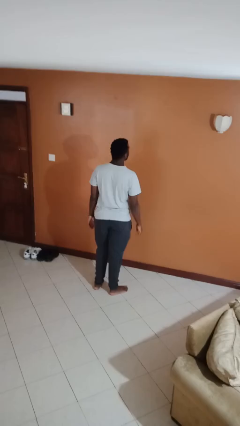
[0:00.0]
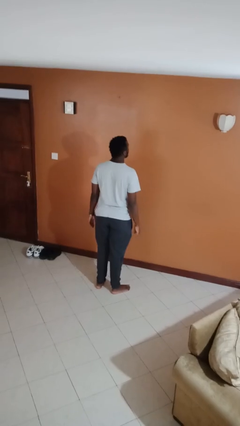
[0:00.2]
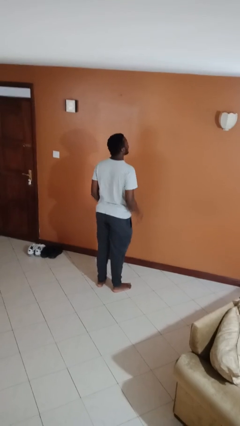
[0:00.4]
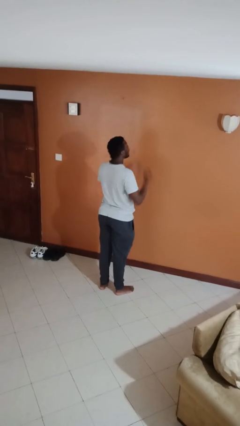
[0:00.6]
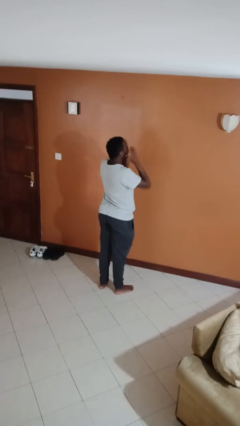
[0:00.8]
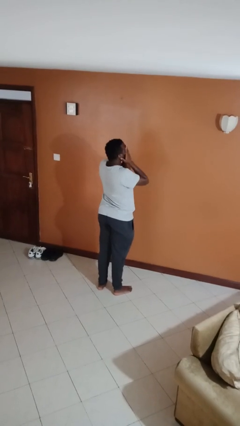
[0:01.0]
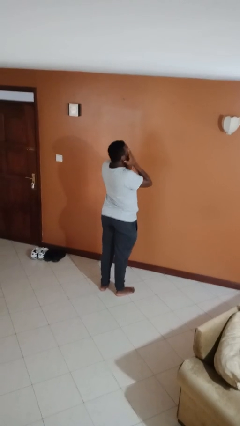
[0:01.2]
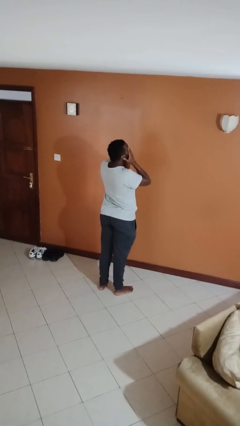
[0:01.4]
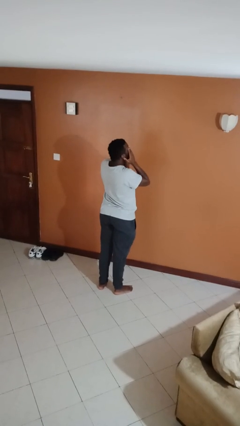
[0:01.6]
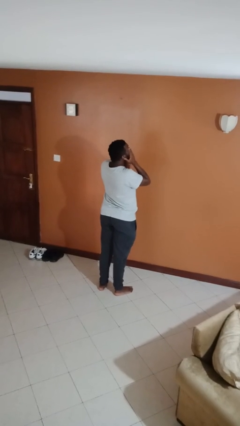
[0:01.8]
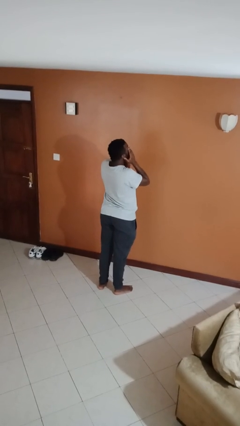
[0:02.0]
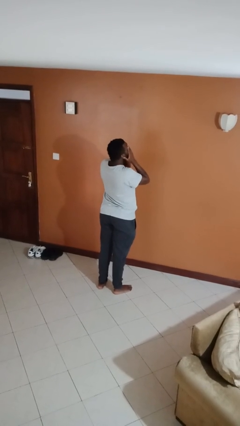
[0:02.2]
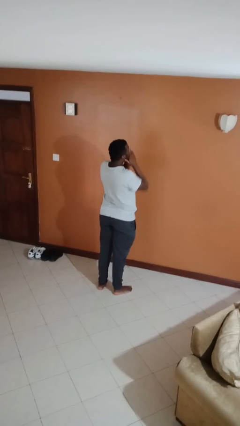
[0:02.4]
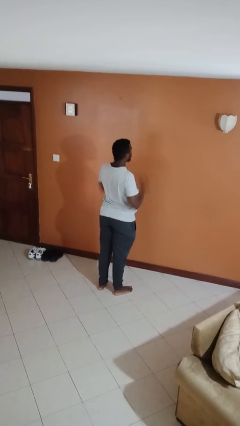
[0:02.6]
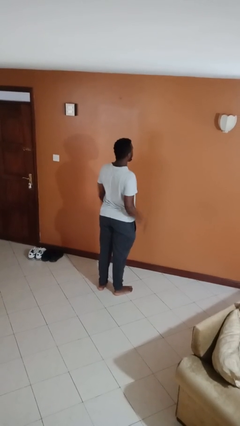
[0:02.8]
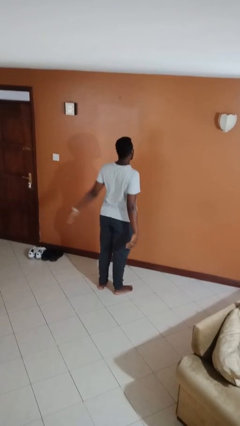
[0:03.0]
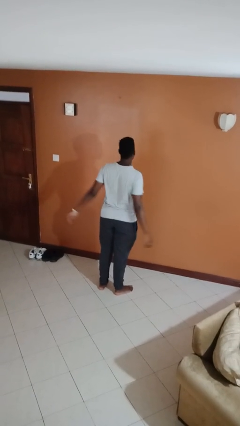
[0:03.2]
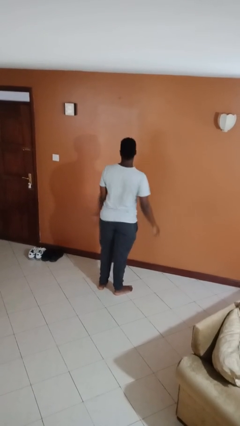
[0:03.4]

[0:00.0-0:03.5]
person rubs eyes

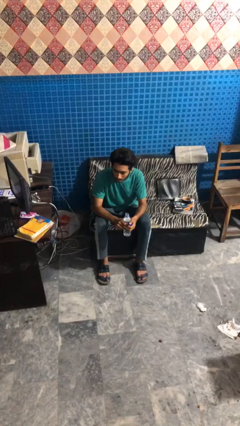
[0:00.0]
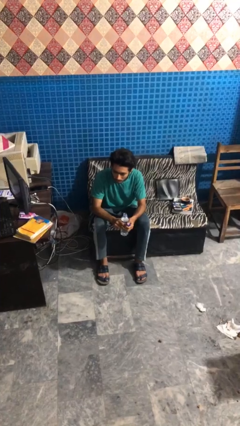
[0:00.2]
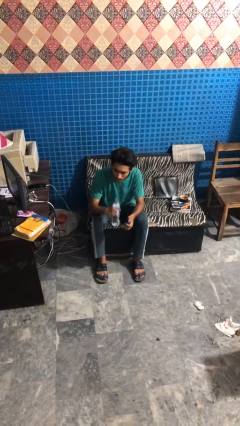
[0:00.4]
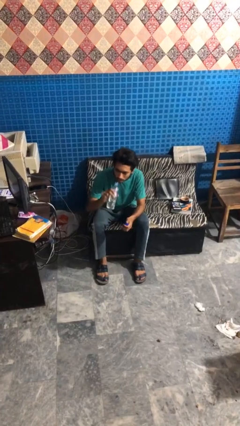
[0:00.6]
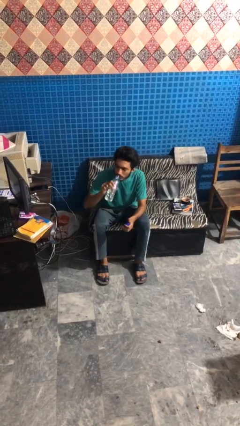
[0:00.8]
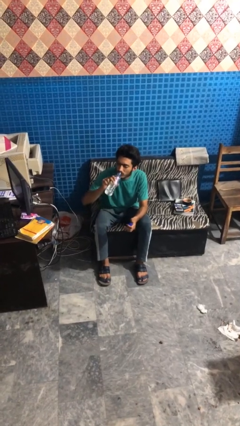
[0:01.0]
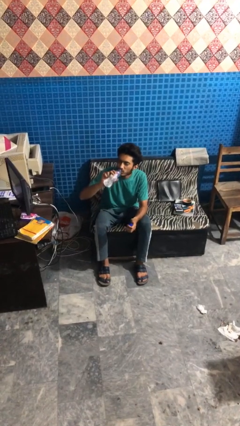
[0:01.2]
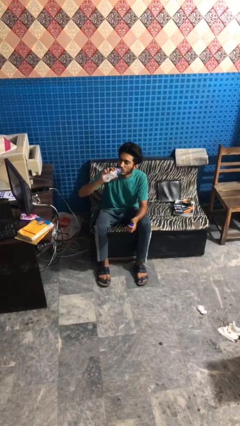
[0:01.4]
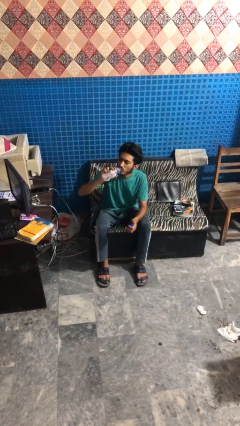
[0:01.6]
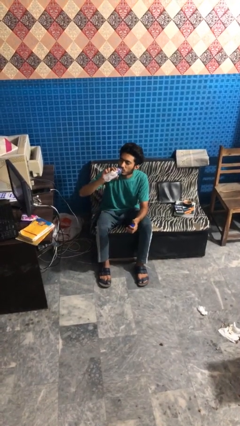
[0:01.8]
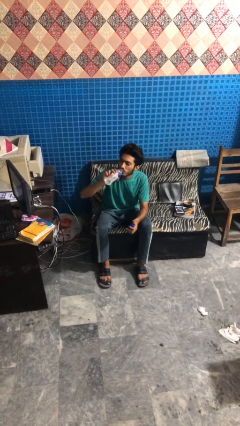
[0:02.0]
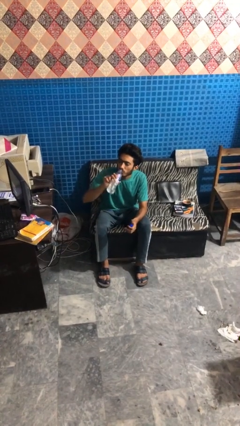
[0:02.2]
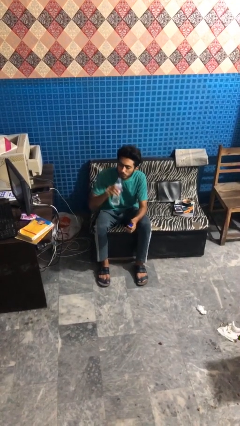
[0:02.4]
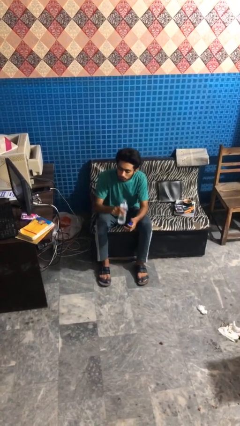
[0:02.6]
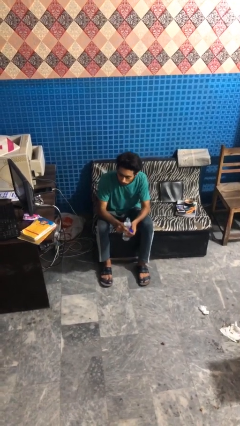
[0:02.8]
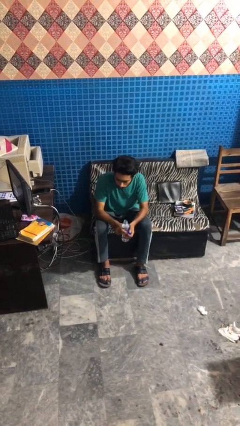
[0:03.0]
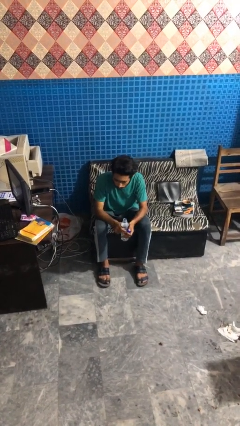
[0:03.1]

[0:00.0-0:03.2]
person drinks from bottle

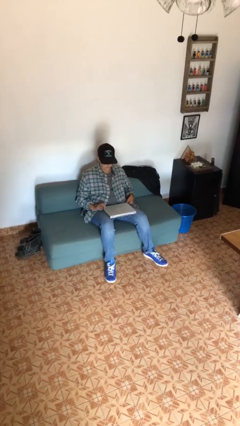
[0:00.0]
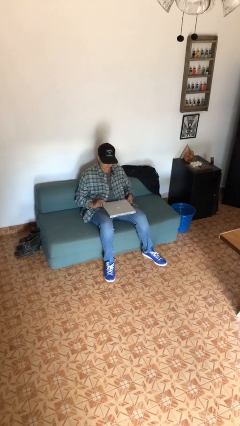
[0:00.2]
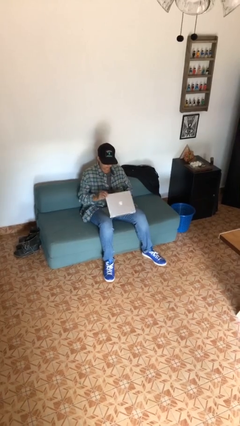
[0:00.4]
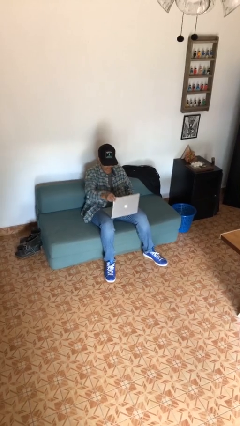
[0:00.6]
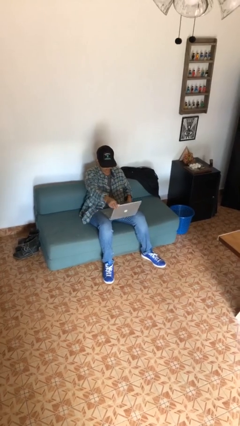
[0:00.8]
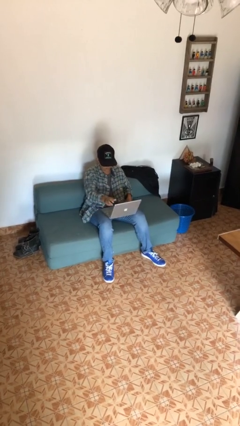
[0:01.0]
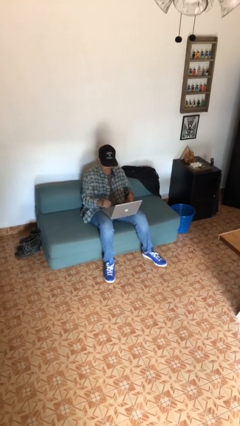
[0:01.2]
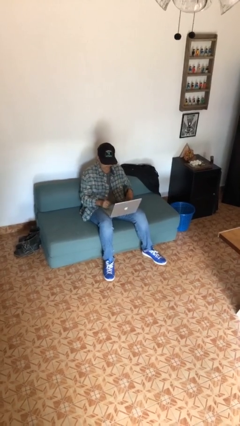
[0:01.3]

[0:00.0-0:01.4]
person opens laptop

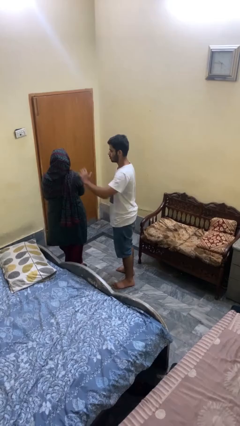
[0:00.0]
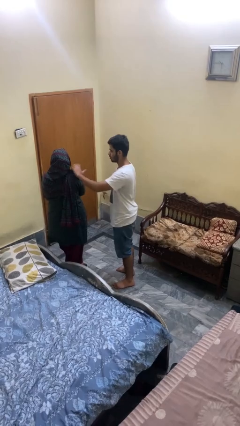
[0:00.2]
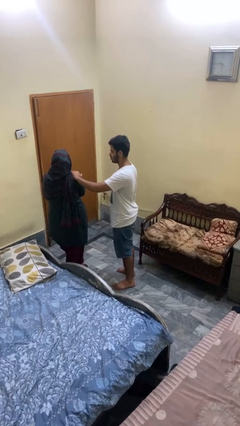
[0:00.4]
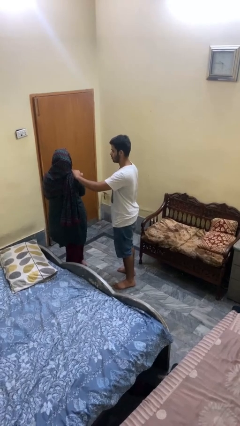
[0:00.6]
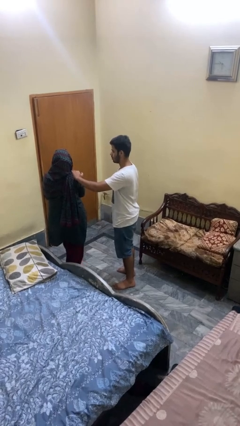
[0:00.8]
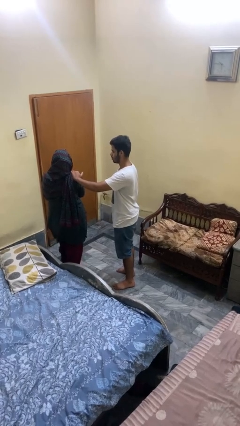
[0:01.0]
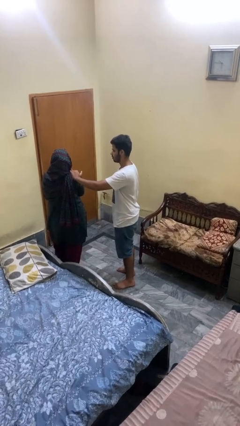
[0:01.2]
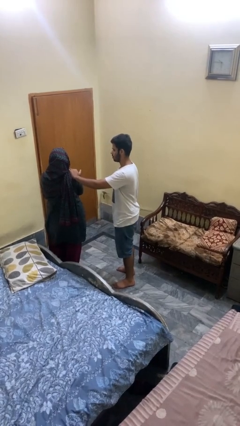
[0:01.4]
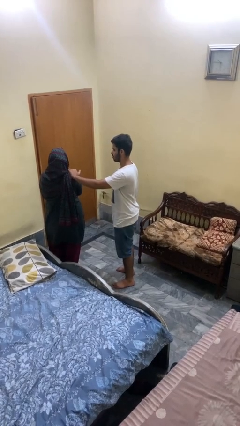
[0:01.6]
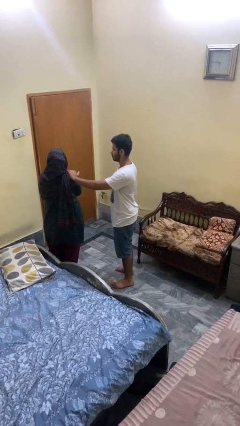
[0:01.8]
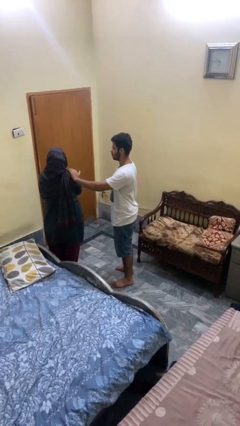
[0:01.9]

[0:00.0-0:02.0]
person pounds shoulders of person

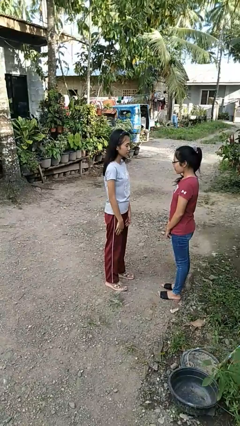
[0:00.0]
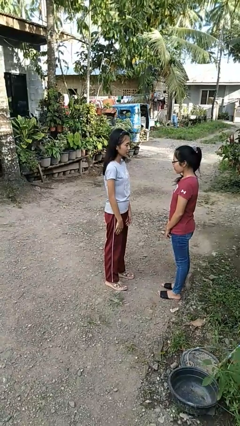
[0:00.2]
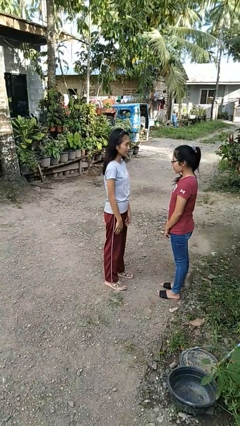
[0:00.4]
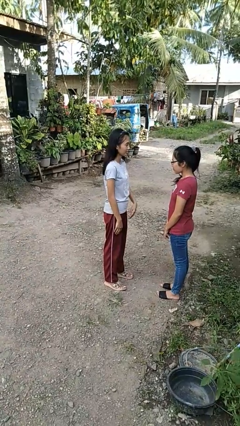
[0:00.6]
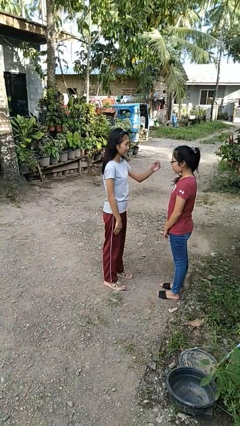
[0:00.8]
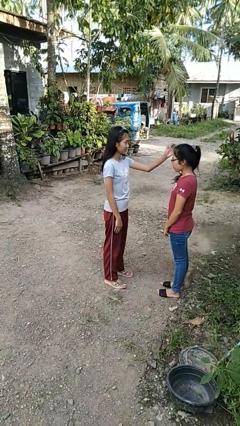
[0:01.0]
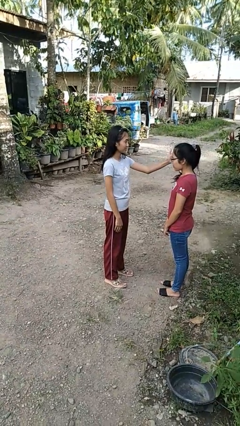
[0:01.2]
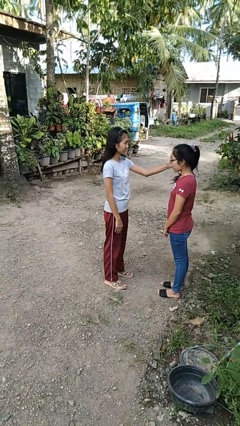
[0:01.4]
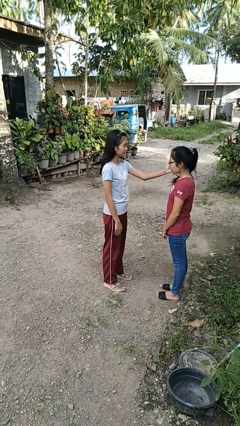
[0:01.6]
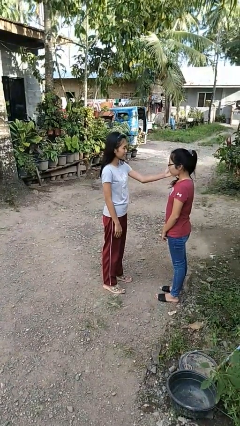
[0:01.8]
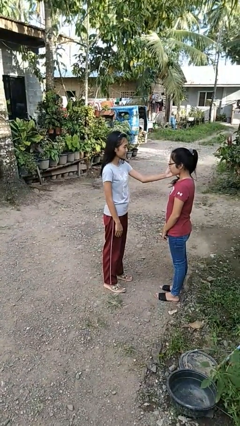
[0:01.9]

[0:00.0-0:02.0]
person touches face of person

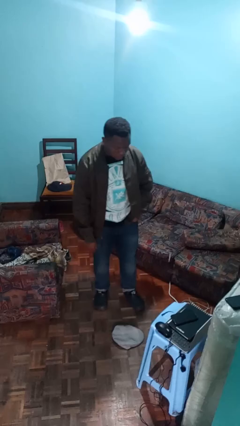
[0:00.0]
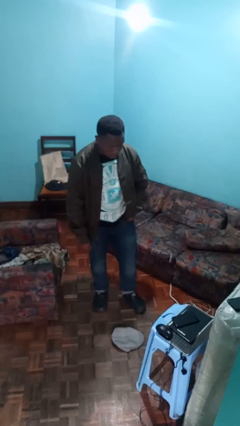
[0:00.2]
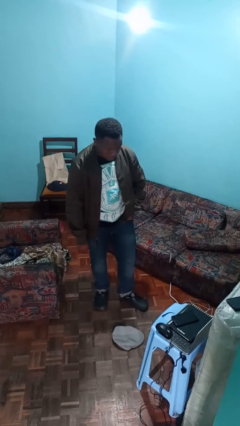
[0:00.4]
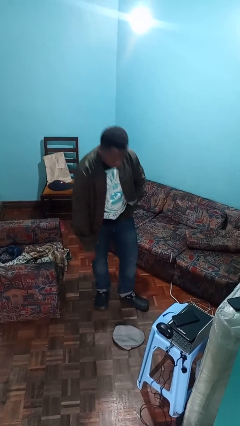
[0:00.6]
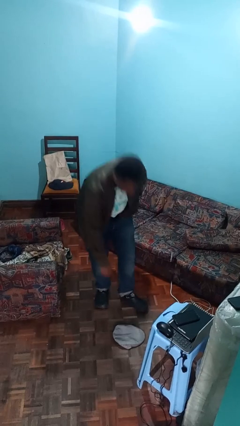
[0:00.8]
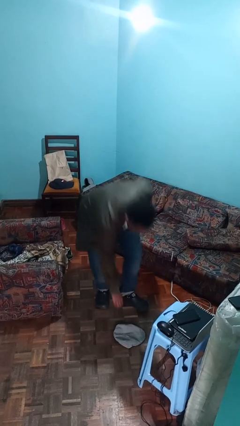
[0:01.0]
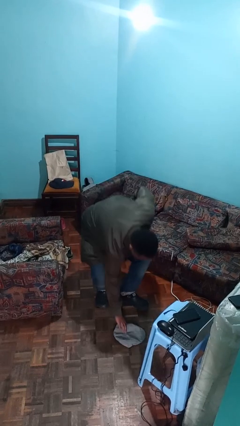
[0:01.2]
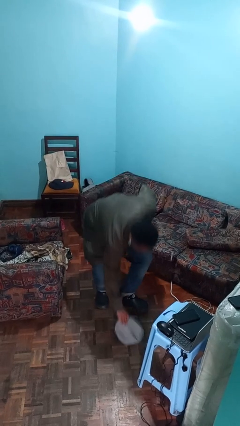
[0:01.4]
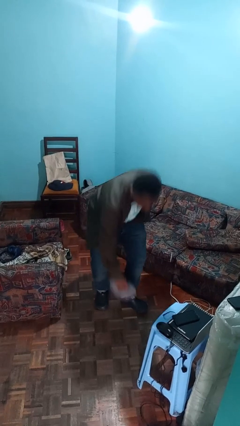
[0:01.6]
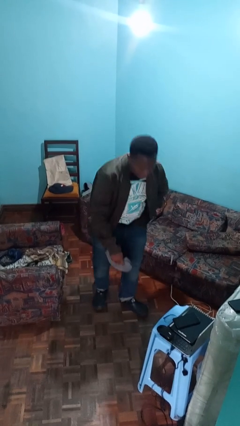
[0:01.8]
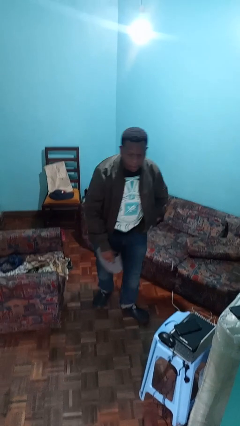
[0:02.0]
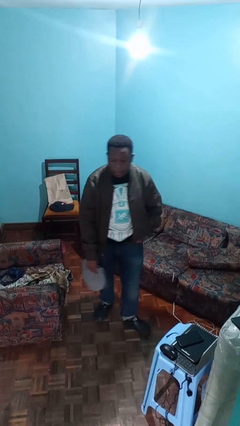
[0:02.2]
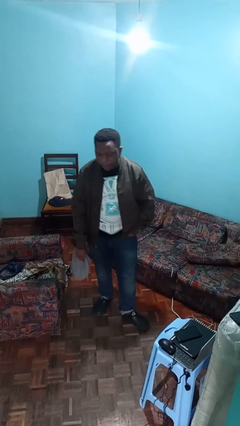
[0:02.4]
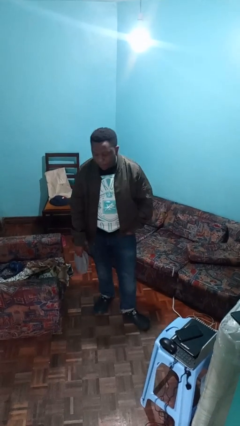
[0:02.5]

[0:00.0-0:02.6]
person picks up object from floor

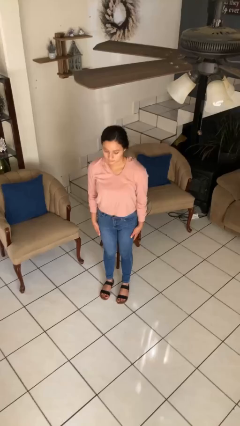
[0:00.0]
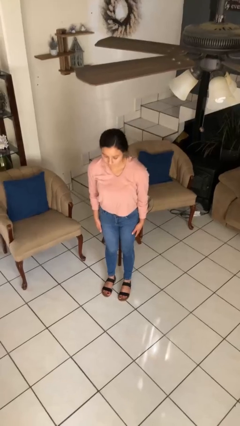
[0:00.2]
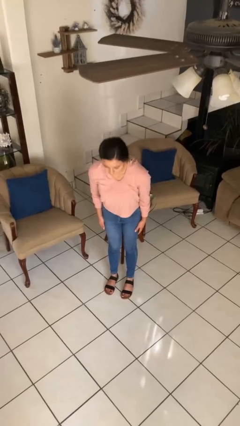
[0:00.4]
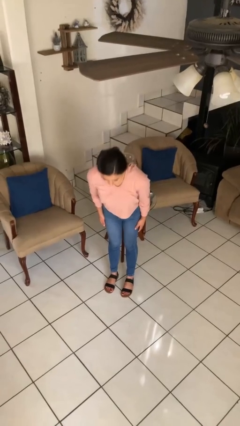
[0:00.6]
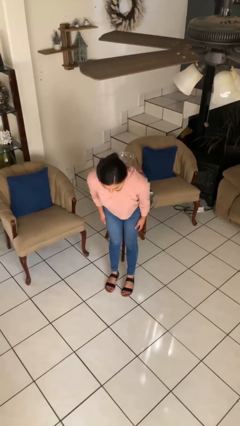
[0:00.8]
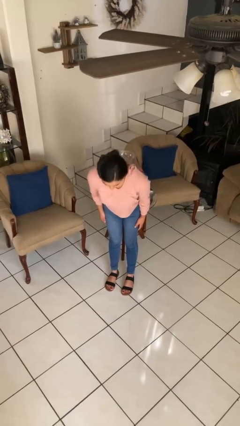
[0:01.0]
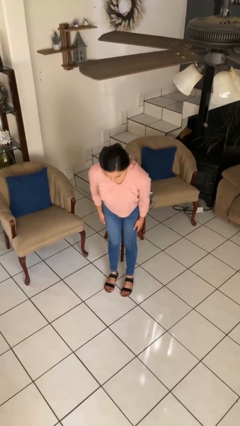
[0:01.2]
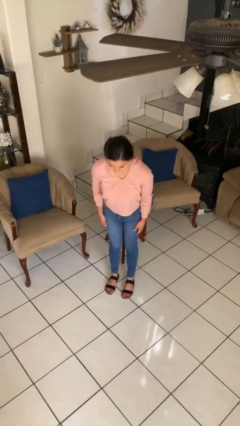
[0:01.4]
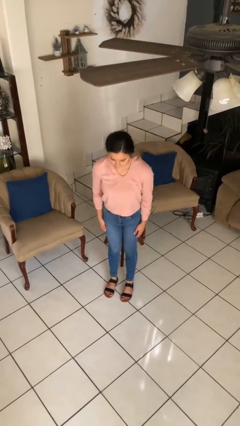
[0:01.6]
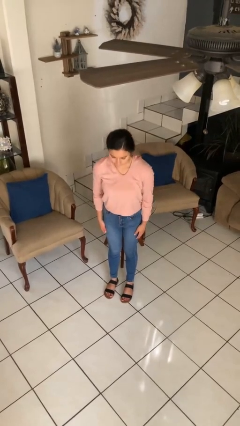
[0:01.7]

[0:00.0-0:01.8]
person bows

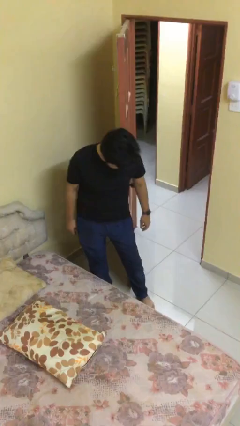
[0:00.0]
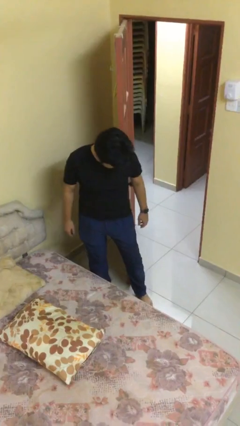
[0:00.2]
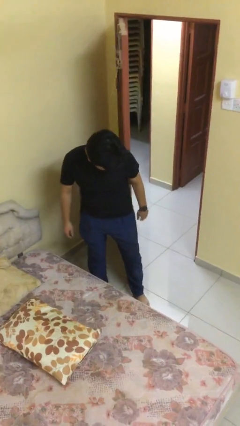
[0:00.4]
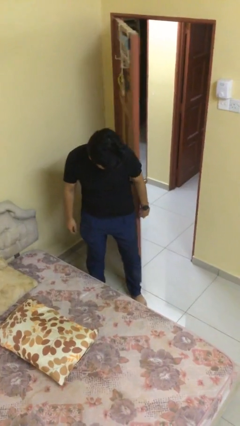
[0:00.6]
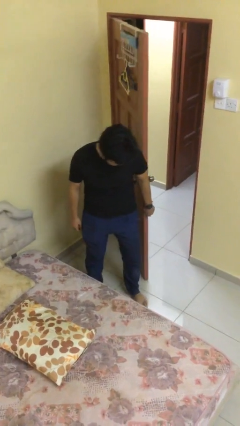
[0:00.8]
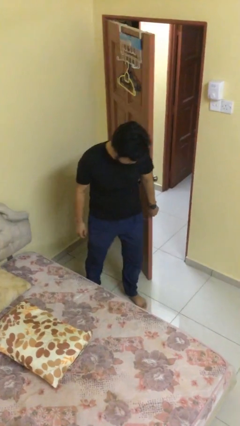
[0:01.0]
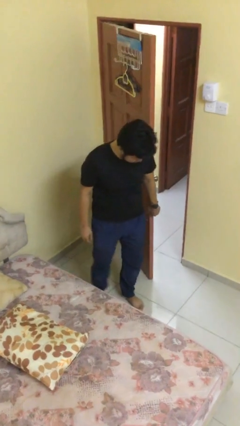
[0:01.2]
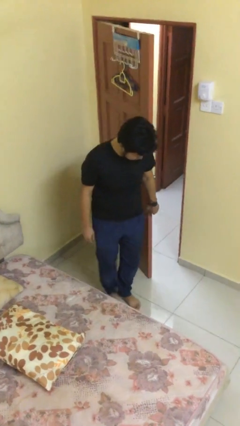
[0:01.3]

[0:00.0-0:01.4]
person closes door with hip
